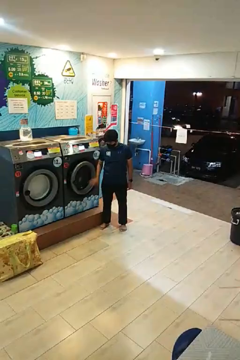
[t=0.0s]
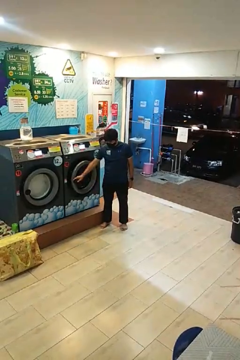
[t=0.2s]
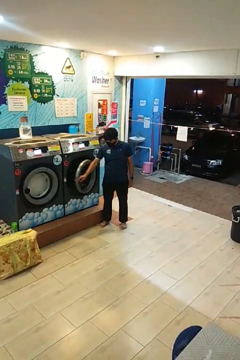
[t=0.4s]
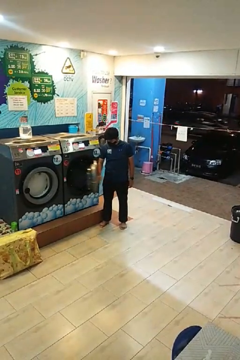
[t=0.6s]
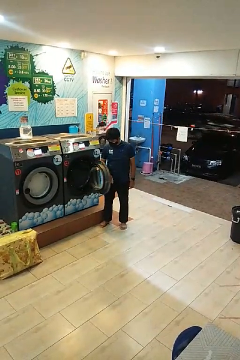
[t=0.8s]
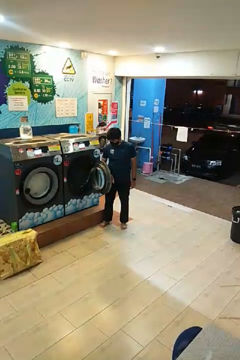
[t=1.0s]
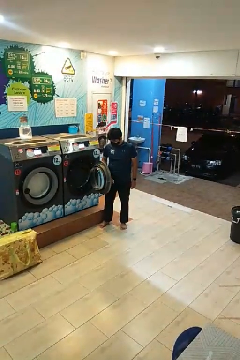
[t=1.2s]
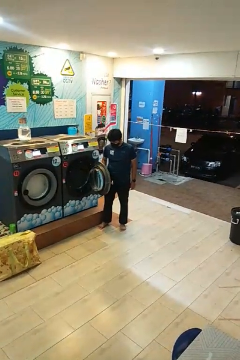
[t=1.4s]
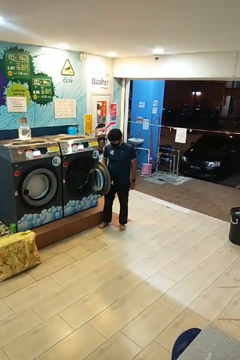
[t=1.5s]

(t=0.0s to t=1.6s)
person opens clothes washer

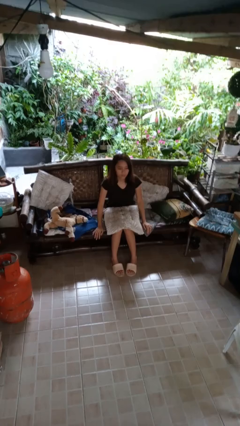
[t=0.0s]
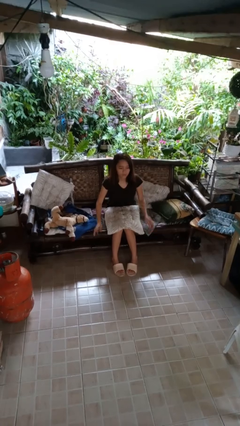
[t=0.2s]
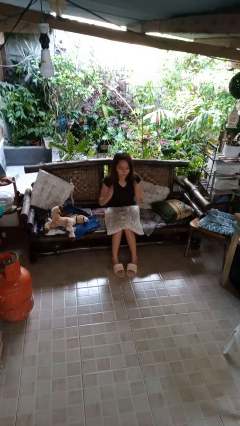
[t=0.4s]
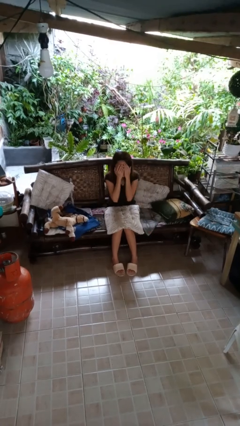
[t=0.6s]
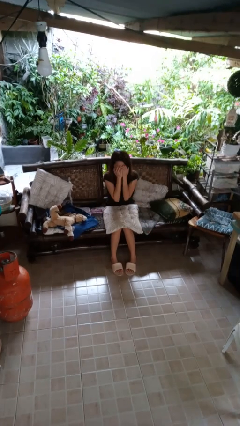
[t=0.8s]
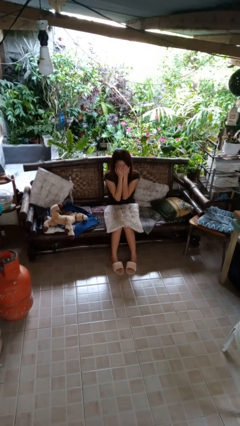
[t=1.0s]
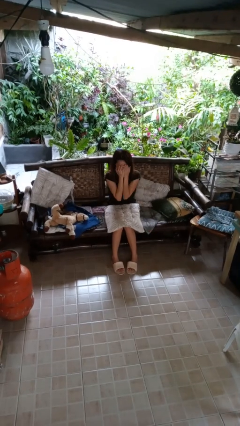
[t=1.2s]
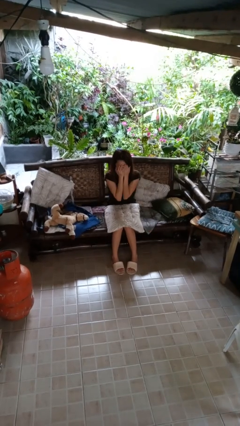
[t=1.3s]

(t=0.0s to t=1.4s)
person covers face with hands

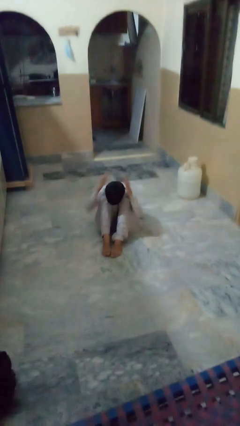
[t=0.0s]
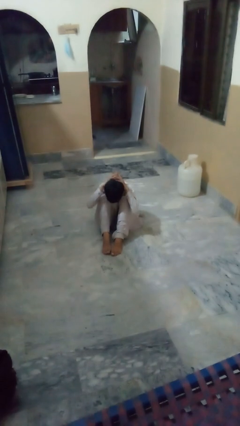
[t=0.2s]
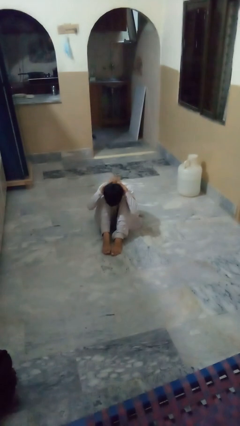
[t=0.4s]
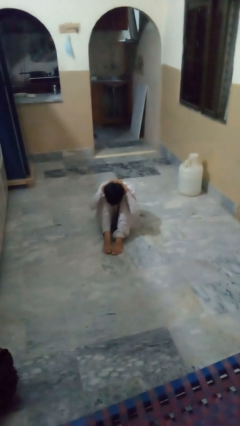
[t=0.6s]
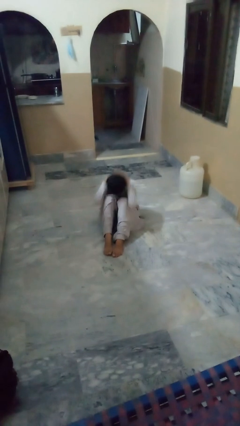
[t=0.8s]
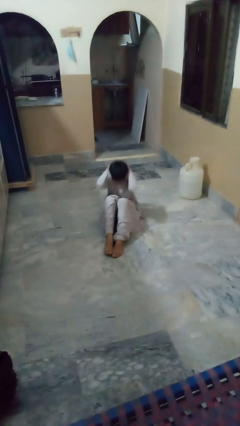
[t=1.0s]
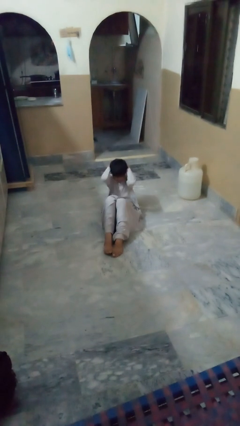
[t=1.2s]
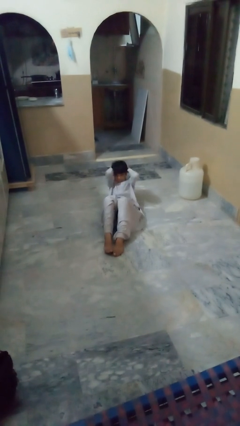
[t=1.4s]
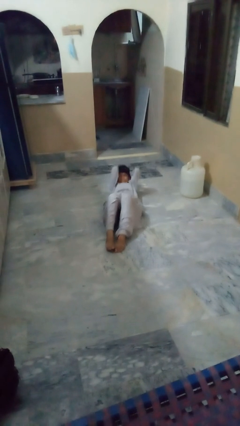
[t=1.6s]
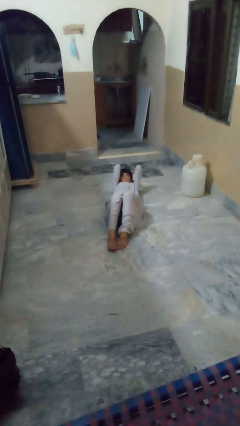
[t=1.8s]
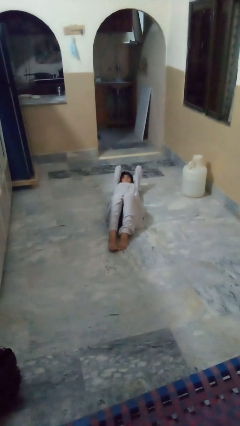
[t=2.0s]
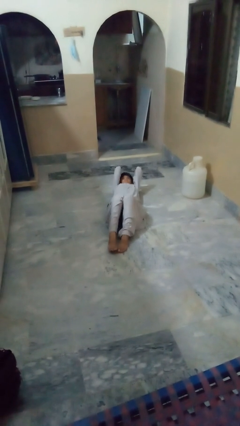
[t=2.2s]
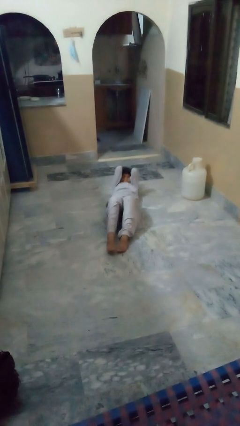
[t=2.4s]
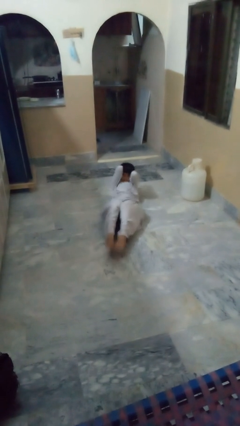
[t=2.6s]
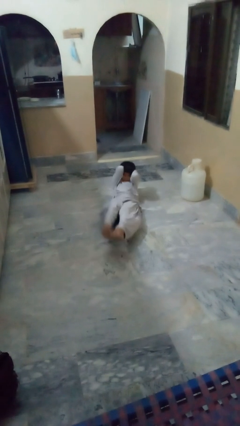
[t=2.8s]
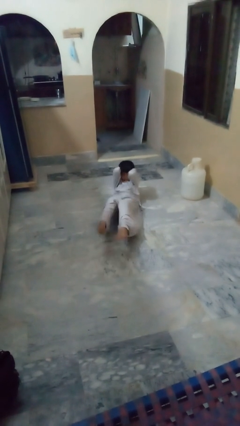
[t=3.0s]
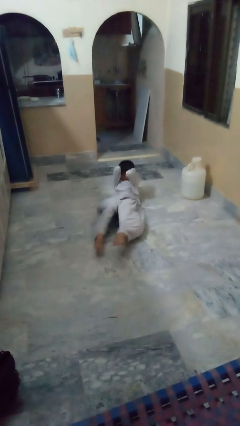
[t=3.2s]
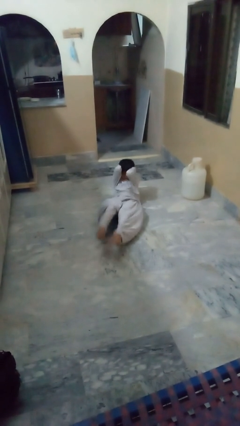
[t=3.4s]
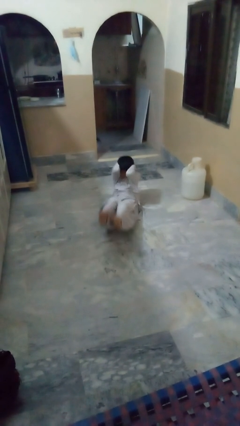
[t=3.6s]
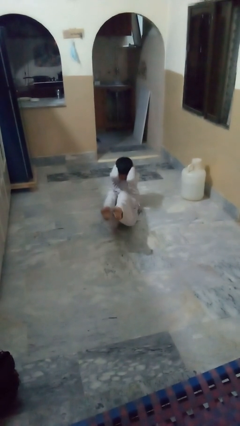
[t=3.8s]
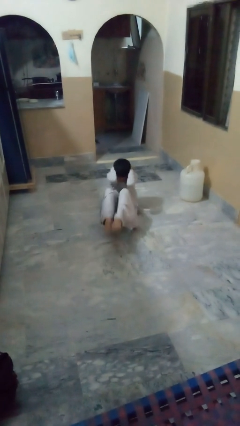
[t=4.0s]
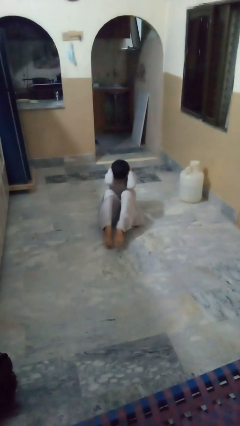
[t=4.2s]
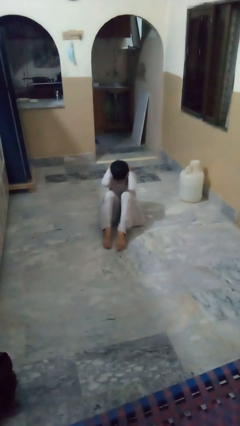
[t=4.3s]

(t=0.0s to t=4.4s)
person exercises with situp

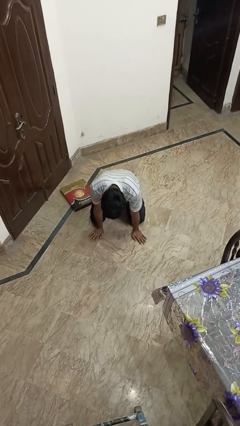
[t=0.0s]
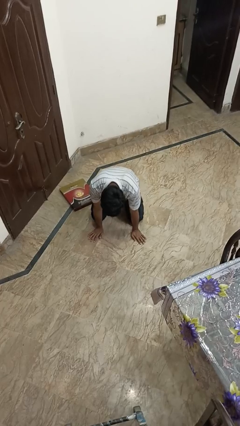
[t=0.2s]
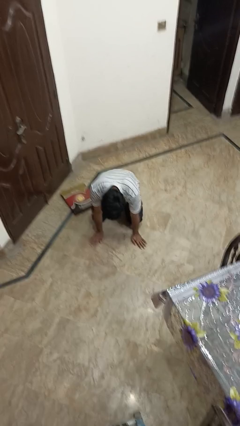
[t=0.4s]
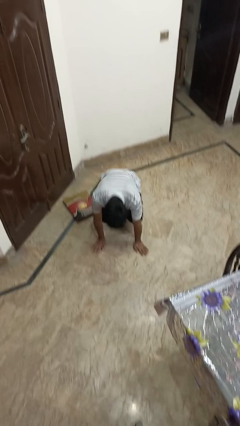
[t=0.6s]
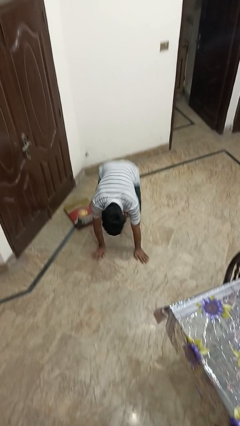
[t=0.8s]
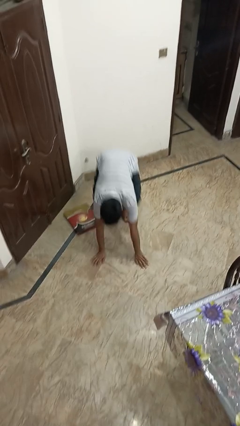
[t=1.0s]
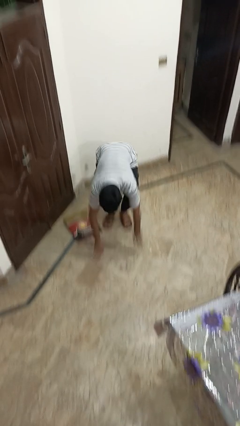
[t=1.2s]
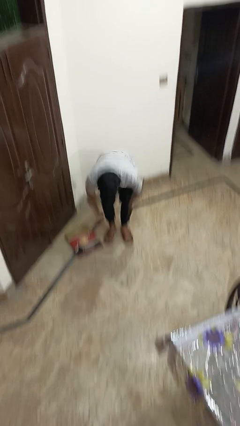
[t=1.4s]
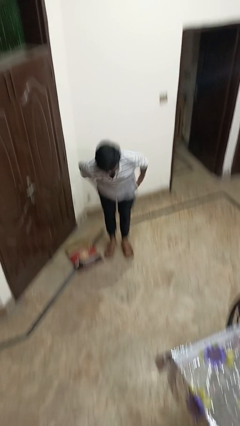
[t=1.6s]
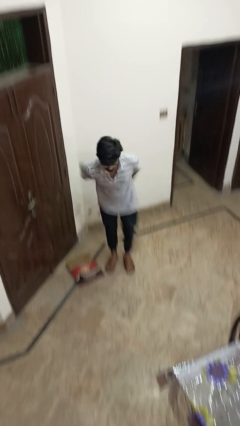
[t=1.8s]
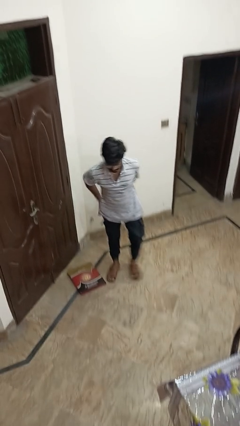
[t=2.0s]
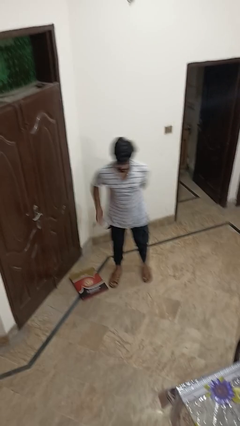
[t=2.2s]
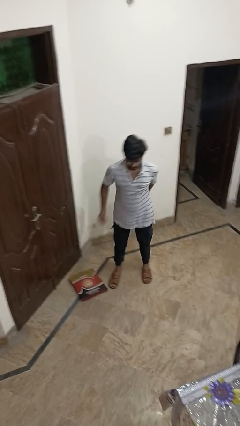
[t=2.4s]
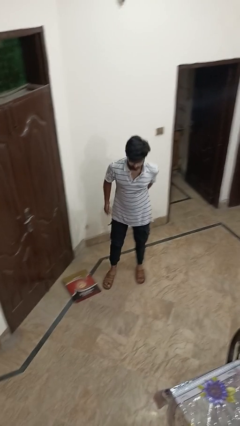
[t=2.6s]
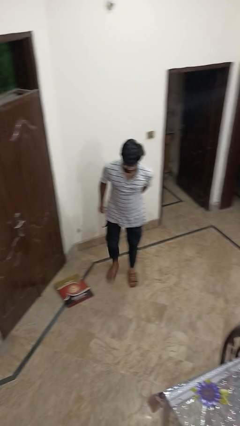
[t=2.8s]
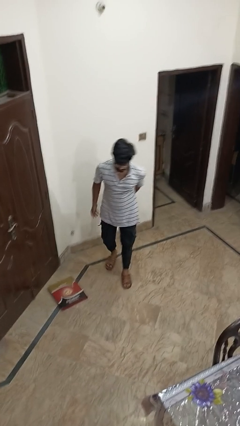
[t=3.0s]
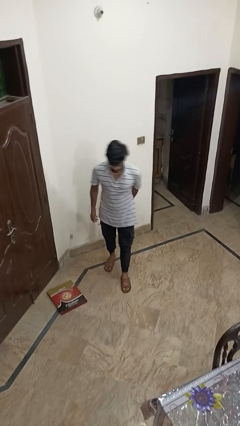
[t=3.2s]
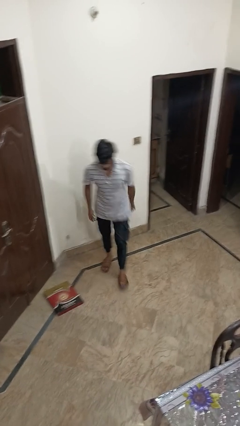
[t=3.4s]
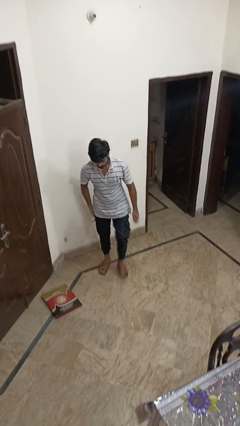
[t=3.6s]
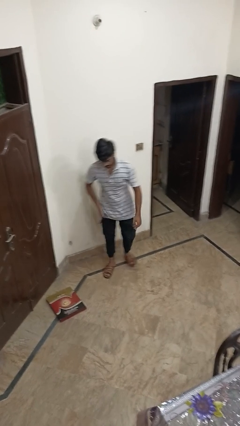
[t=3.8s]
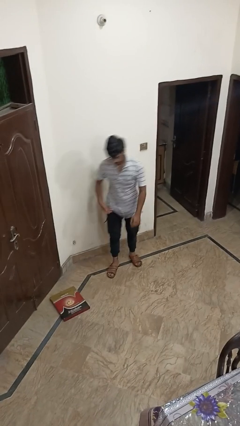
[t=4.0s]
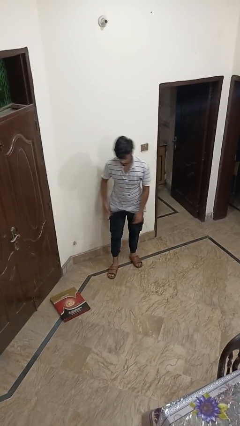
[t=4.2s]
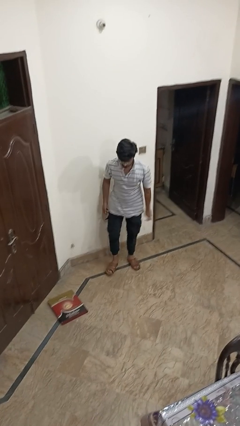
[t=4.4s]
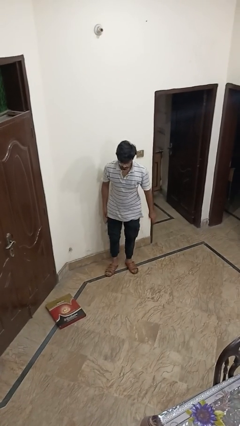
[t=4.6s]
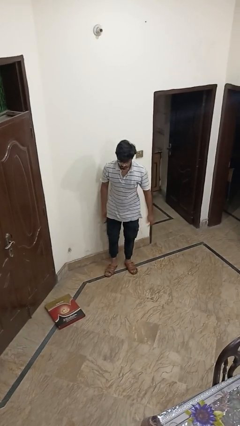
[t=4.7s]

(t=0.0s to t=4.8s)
person stands up from floor

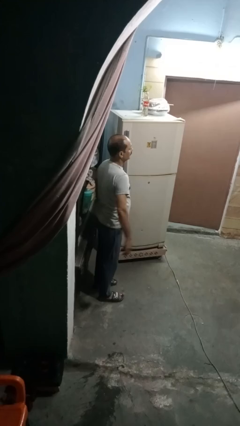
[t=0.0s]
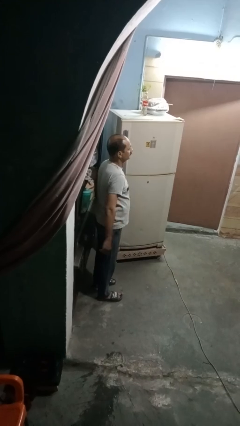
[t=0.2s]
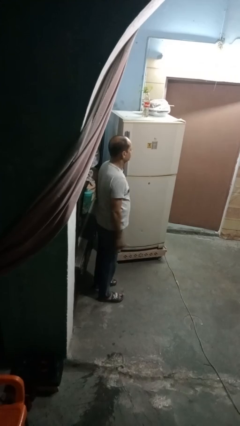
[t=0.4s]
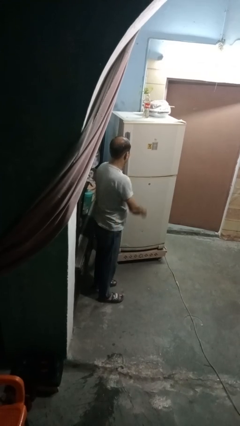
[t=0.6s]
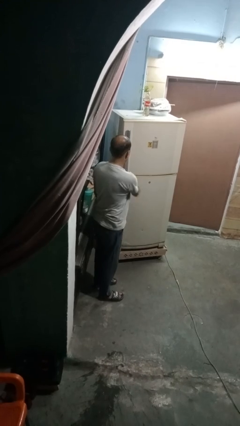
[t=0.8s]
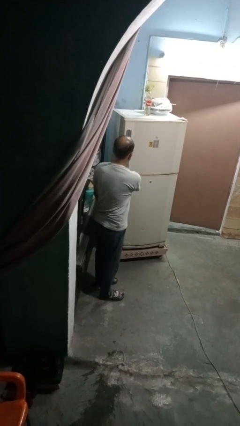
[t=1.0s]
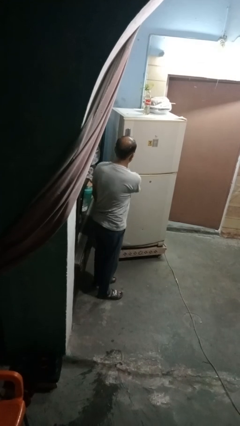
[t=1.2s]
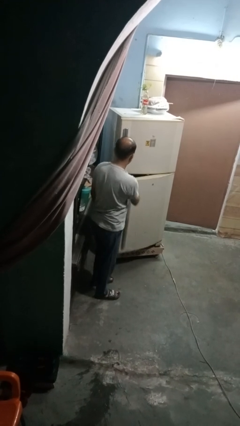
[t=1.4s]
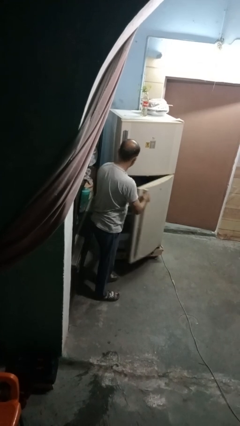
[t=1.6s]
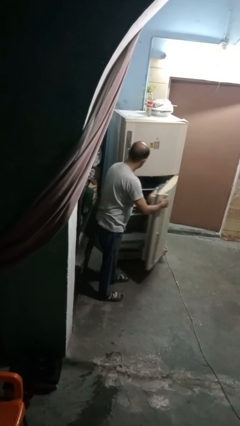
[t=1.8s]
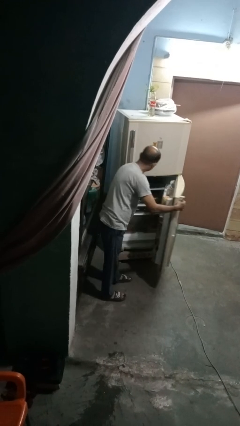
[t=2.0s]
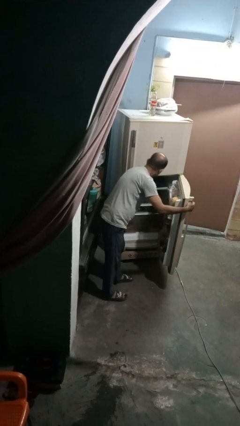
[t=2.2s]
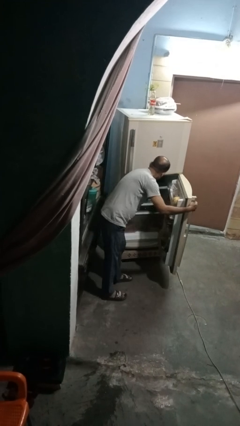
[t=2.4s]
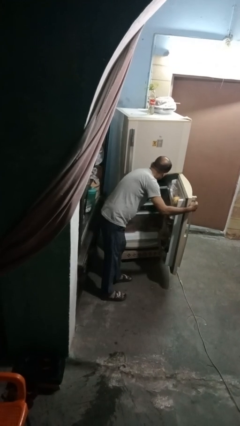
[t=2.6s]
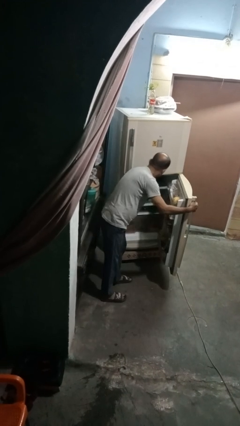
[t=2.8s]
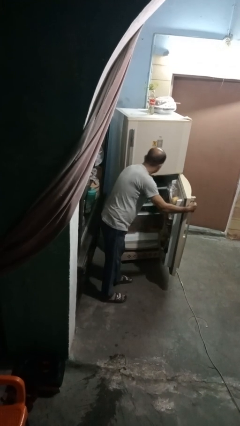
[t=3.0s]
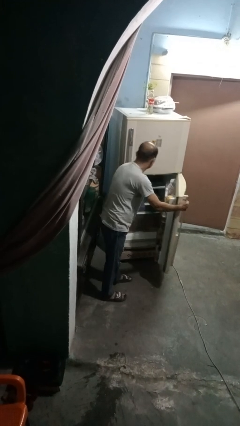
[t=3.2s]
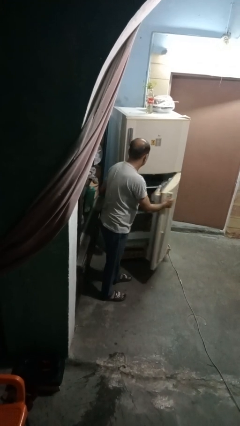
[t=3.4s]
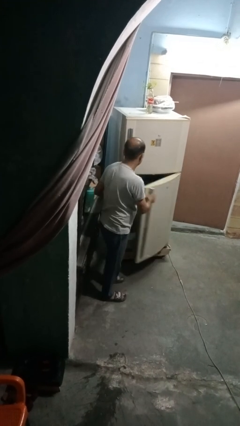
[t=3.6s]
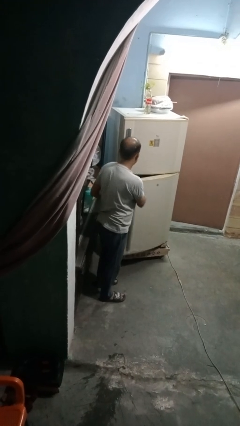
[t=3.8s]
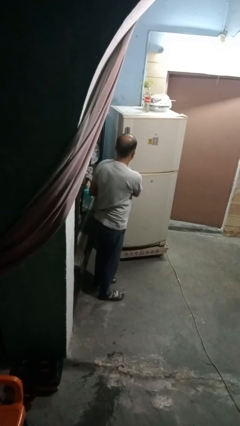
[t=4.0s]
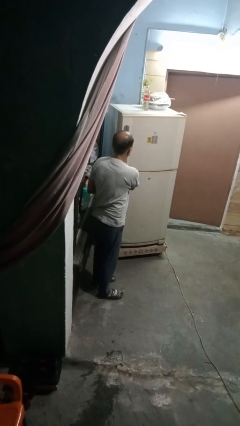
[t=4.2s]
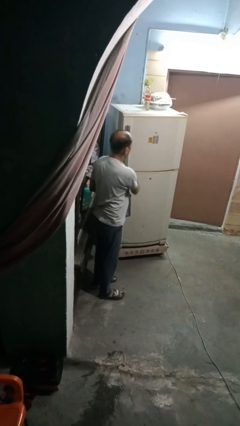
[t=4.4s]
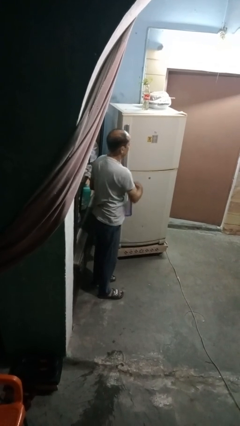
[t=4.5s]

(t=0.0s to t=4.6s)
person takes object from refrigerator

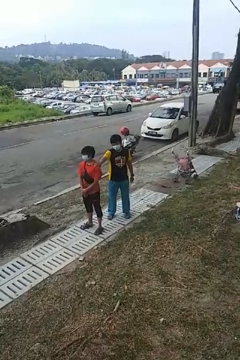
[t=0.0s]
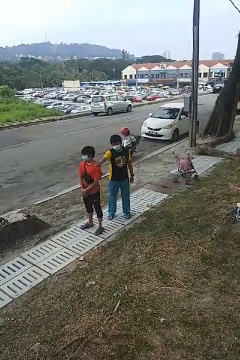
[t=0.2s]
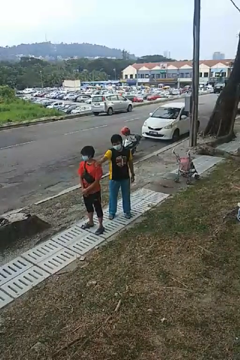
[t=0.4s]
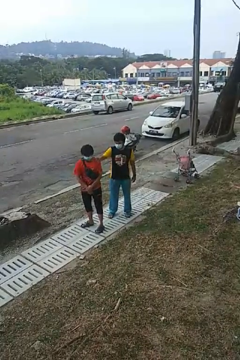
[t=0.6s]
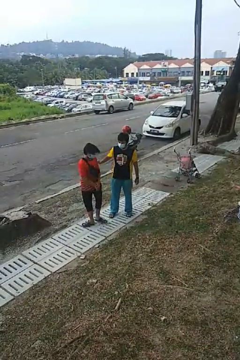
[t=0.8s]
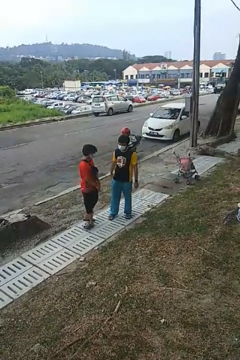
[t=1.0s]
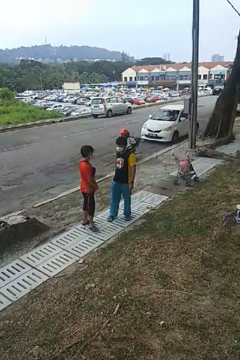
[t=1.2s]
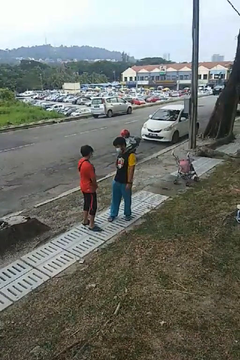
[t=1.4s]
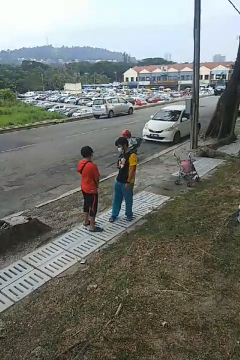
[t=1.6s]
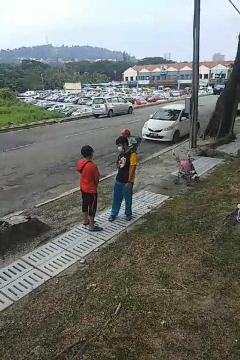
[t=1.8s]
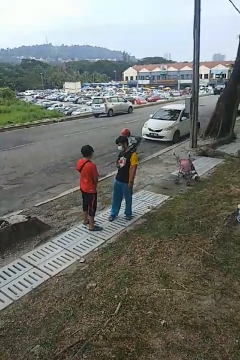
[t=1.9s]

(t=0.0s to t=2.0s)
person spins person around
